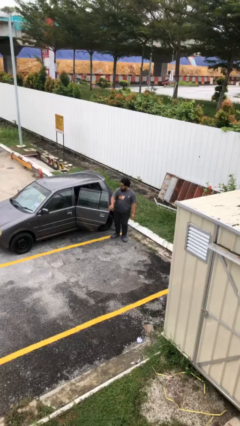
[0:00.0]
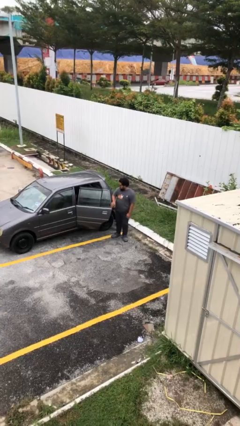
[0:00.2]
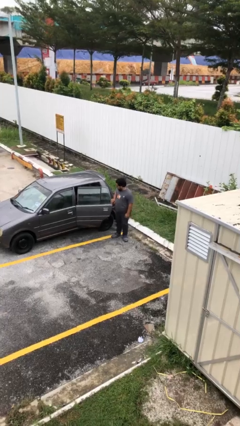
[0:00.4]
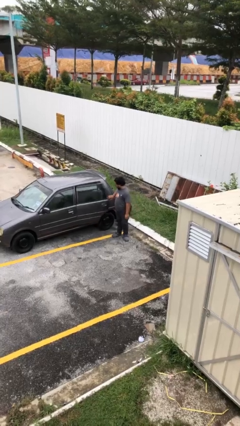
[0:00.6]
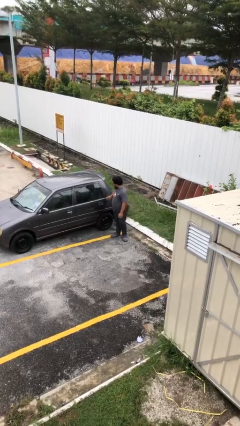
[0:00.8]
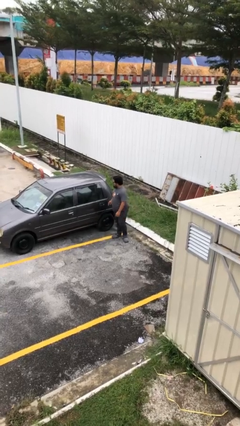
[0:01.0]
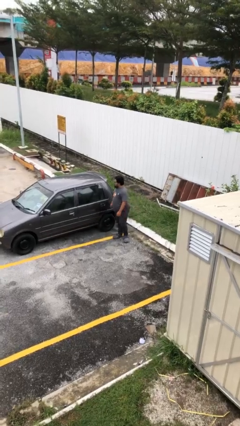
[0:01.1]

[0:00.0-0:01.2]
person closes car door

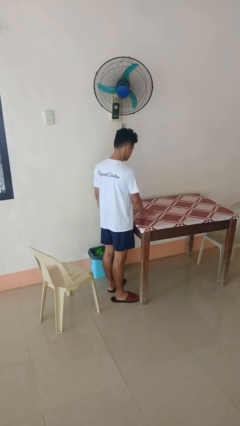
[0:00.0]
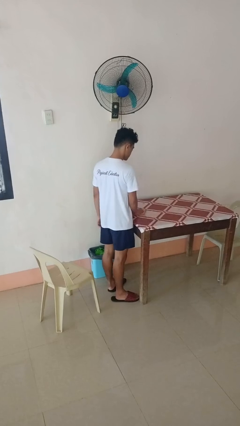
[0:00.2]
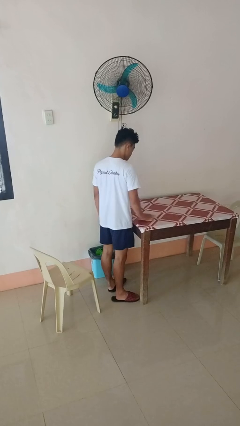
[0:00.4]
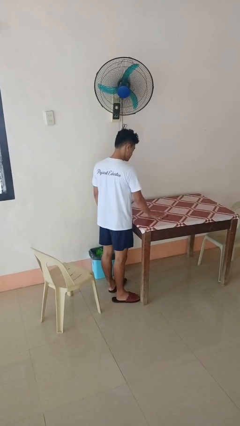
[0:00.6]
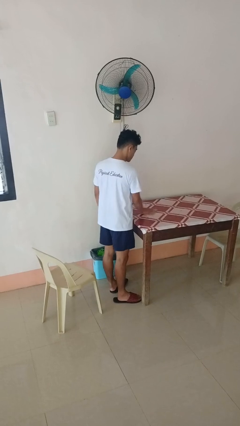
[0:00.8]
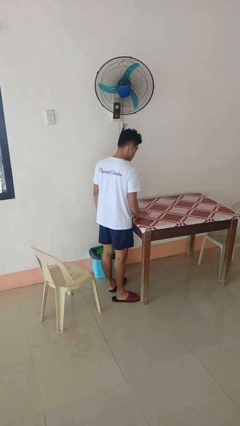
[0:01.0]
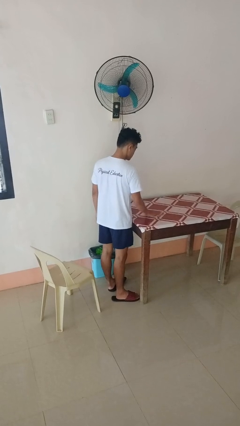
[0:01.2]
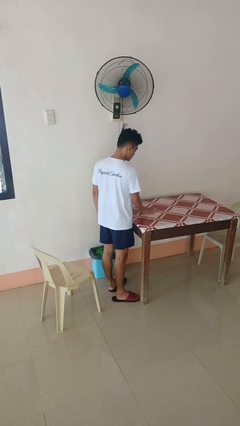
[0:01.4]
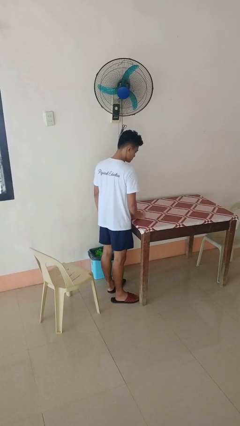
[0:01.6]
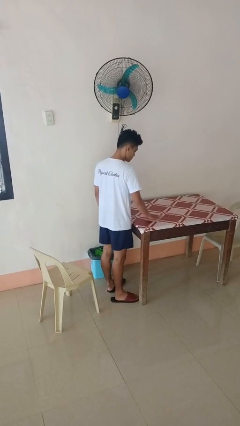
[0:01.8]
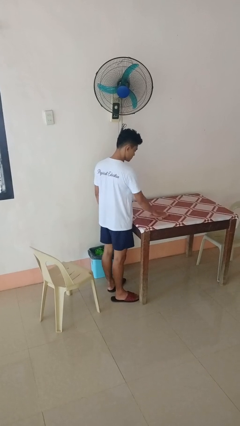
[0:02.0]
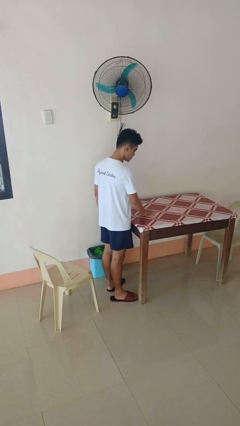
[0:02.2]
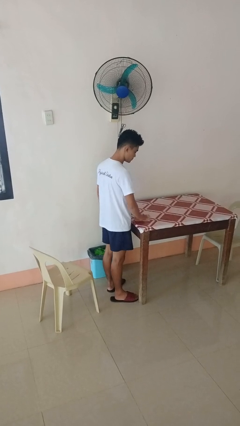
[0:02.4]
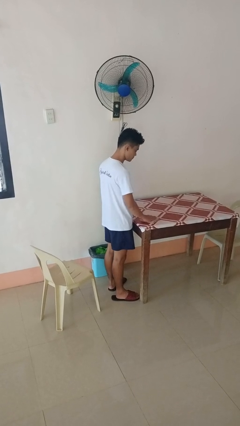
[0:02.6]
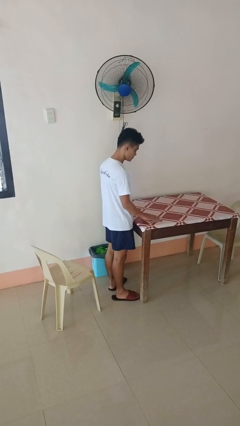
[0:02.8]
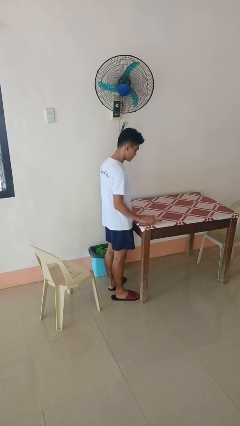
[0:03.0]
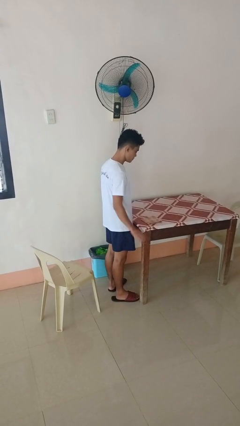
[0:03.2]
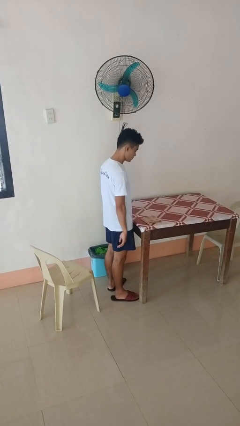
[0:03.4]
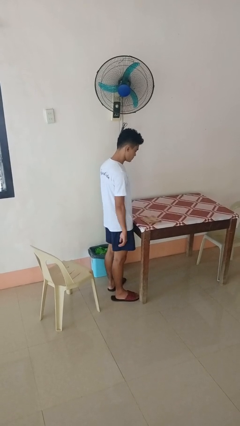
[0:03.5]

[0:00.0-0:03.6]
person cleans table with rag

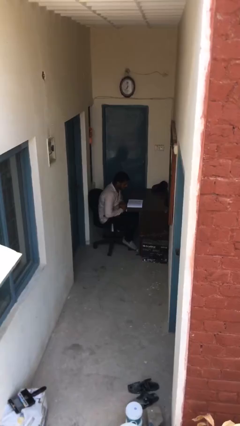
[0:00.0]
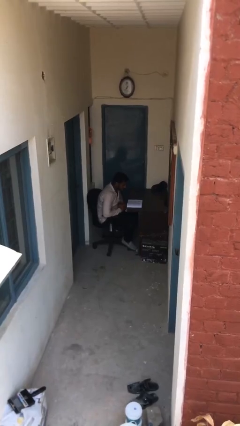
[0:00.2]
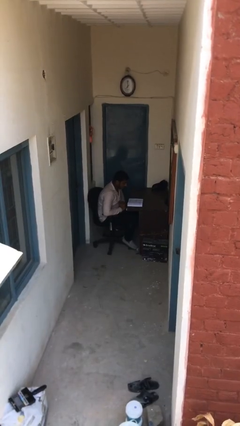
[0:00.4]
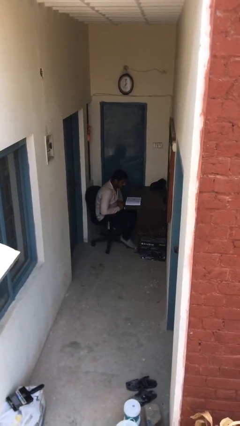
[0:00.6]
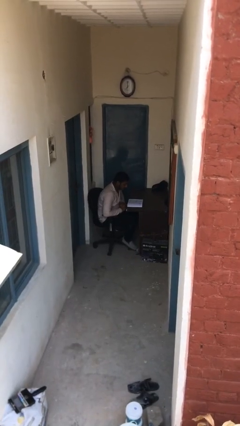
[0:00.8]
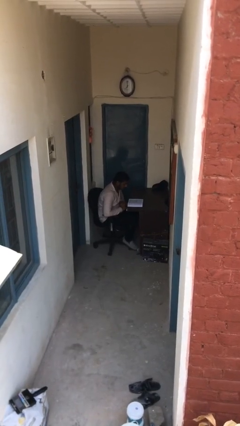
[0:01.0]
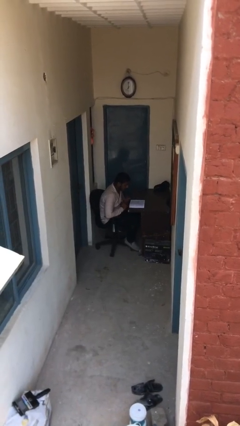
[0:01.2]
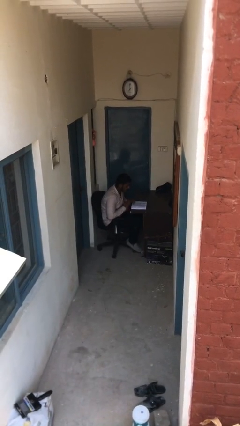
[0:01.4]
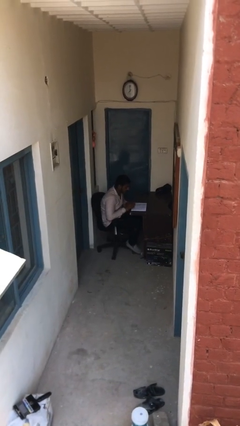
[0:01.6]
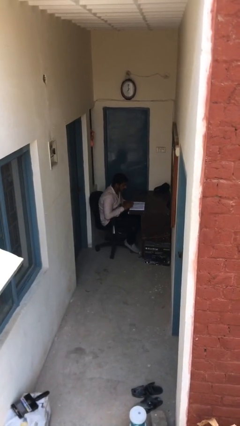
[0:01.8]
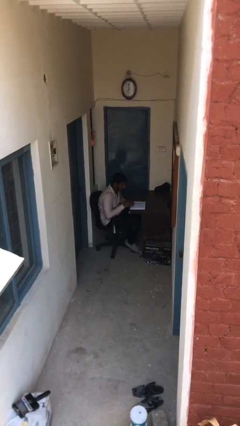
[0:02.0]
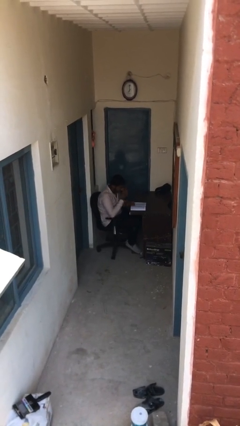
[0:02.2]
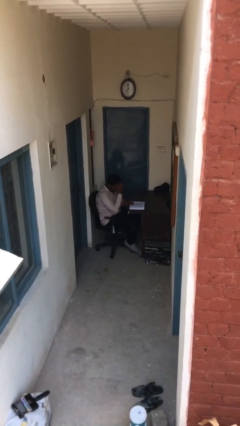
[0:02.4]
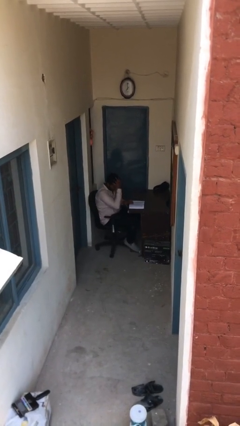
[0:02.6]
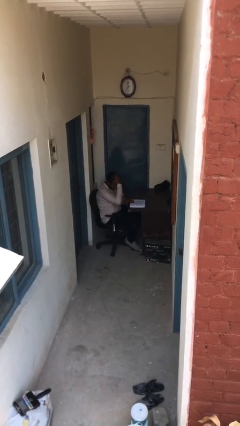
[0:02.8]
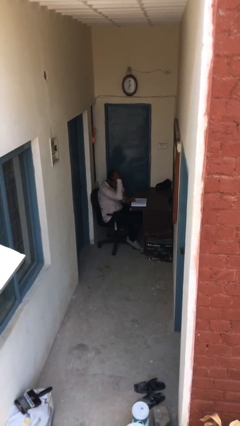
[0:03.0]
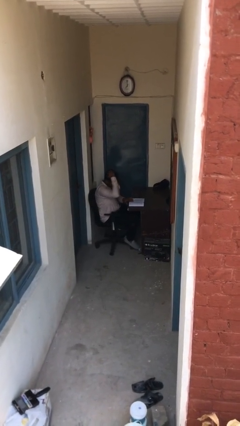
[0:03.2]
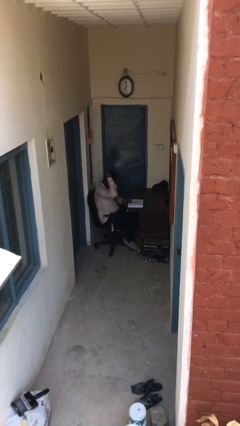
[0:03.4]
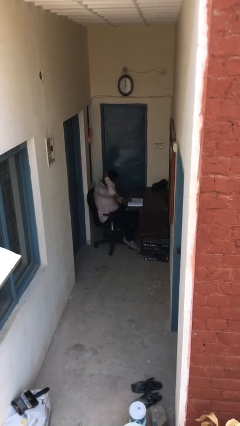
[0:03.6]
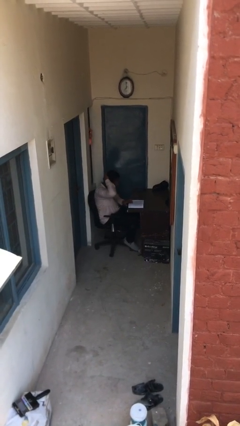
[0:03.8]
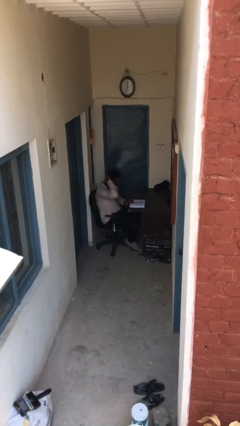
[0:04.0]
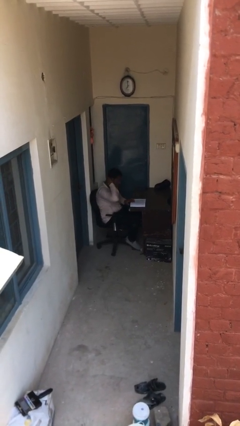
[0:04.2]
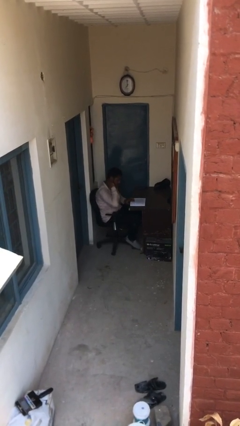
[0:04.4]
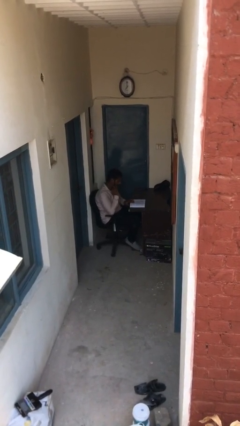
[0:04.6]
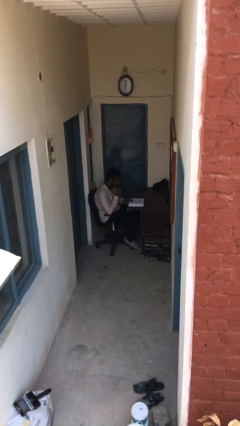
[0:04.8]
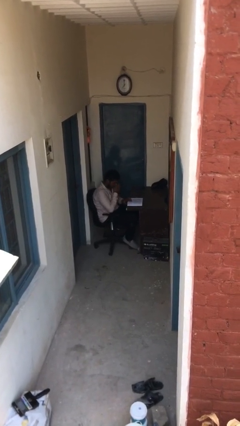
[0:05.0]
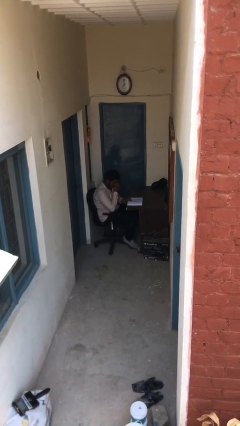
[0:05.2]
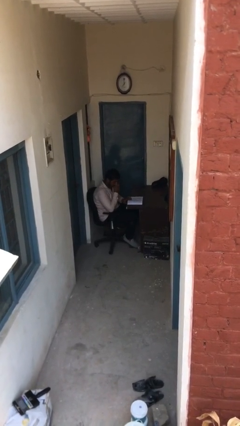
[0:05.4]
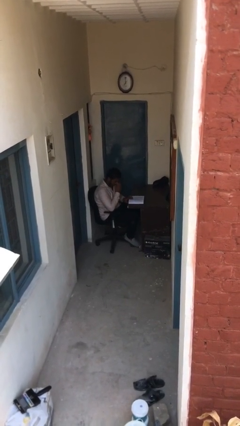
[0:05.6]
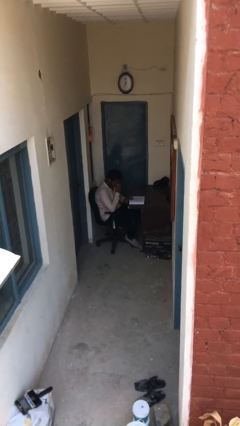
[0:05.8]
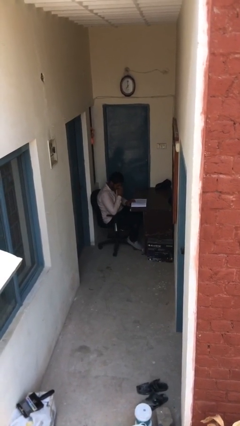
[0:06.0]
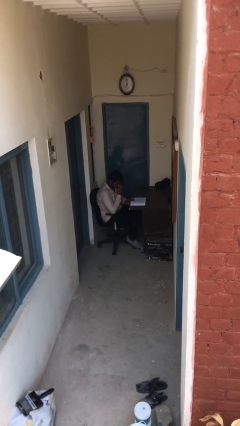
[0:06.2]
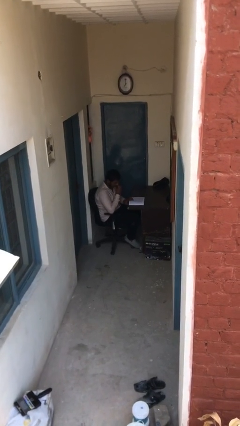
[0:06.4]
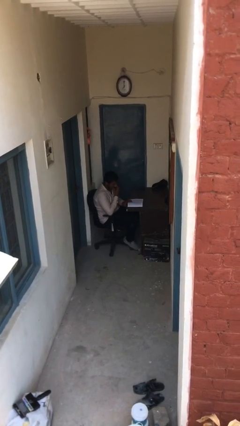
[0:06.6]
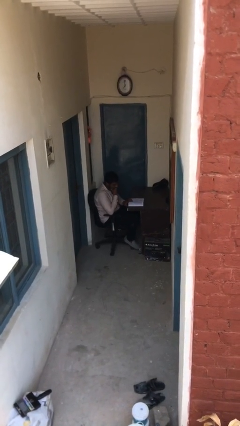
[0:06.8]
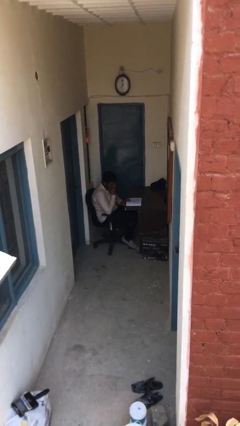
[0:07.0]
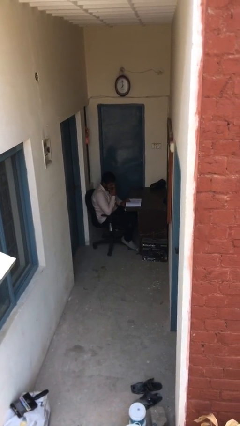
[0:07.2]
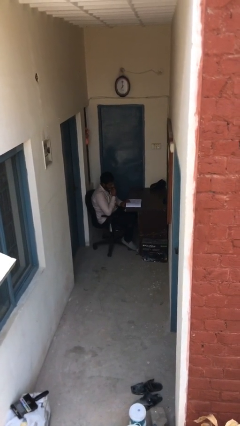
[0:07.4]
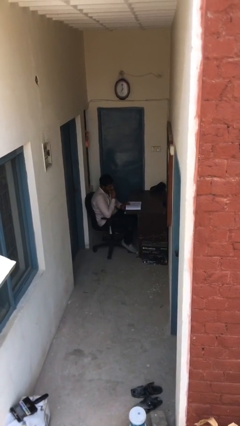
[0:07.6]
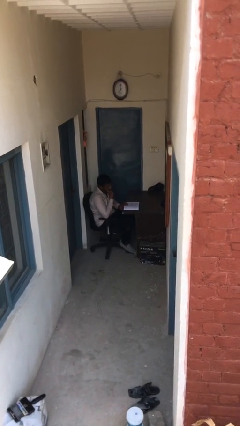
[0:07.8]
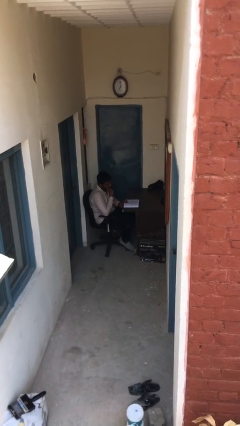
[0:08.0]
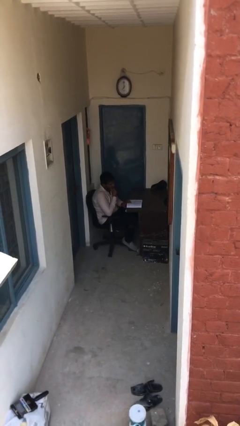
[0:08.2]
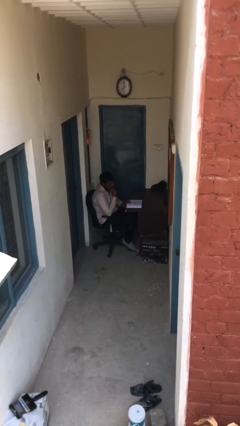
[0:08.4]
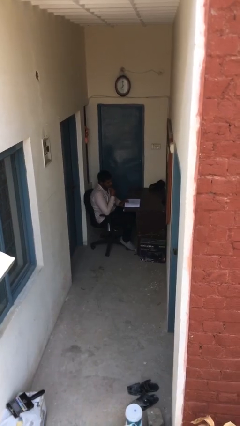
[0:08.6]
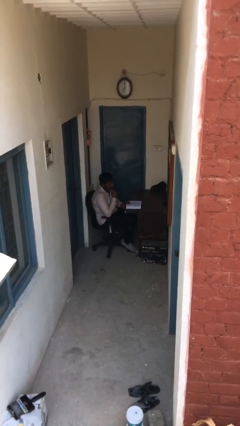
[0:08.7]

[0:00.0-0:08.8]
person reads document

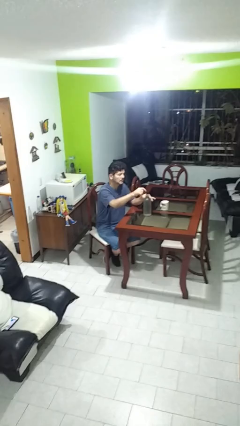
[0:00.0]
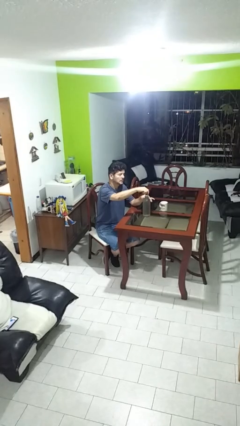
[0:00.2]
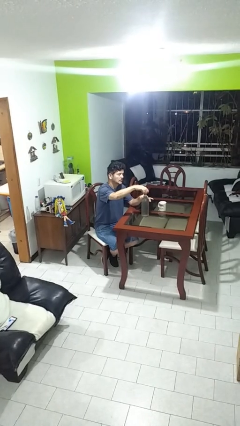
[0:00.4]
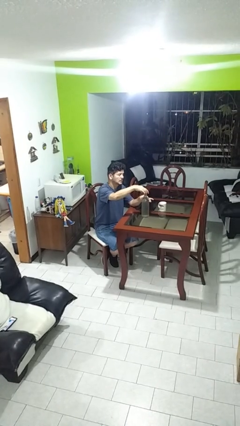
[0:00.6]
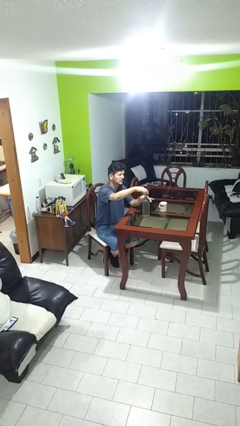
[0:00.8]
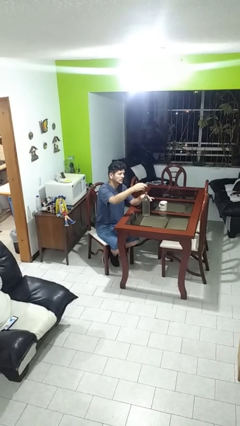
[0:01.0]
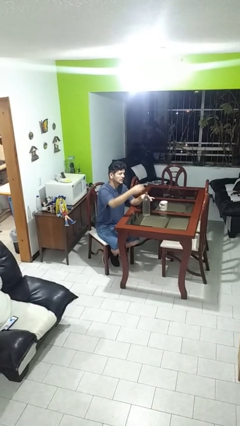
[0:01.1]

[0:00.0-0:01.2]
person unscrews lid from bottle

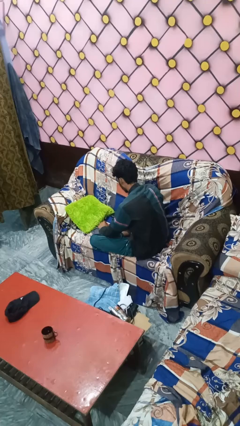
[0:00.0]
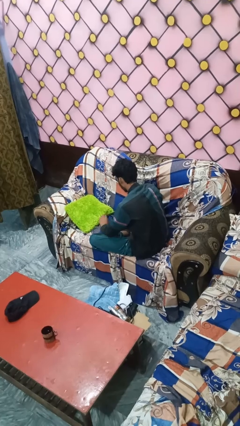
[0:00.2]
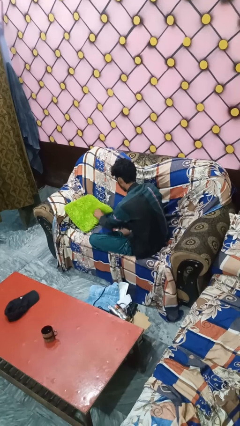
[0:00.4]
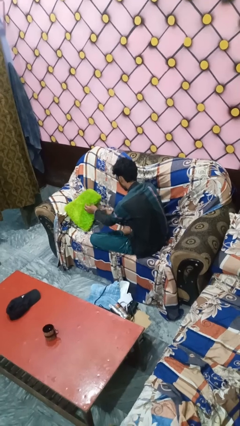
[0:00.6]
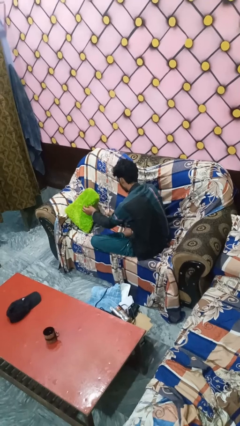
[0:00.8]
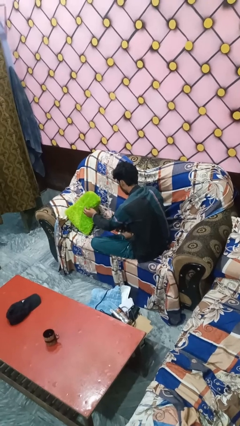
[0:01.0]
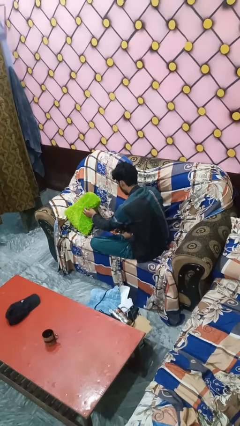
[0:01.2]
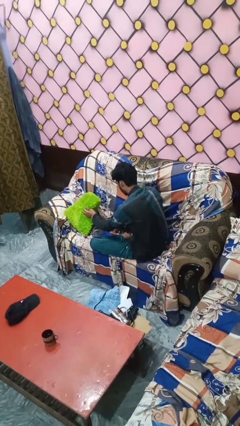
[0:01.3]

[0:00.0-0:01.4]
person searches under couch

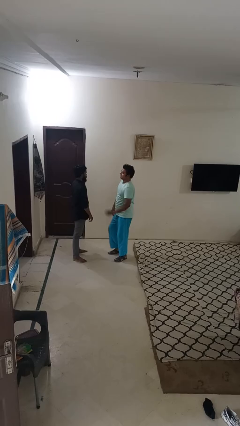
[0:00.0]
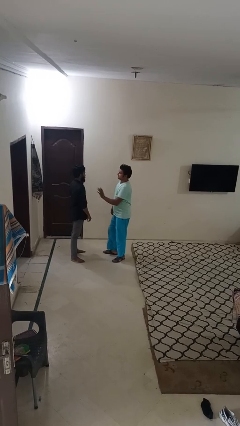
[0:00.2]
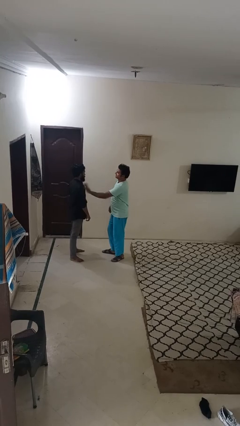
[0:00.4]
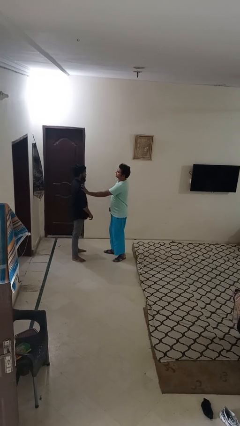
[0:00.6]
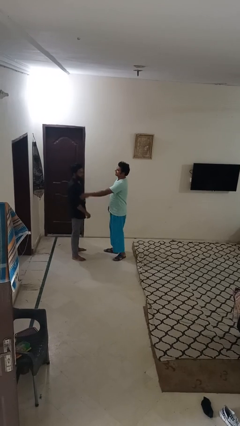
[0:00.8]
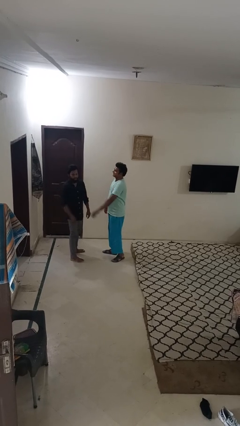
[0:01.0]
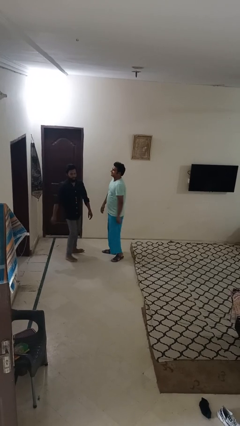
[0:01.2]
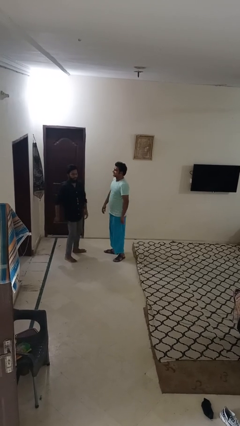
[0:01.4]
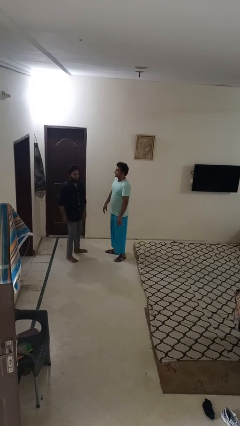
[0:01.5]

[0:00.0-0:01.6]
person shoves person
